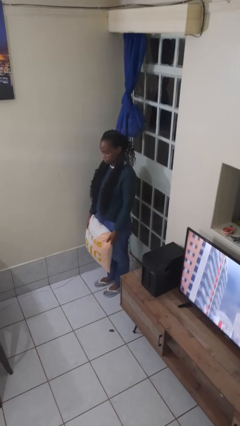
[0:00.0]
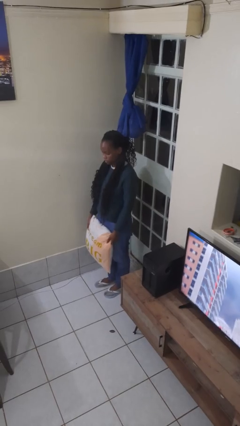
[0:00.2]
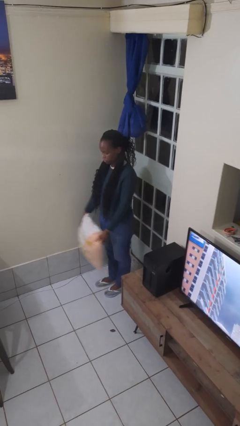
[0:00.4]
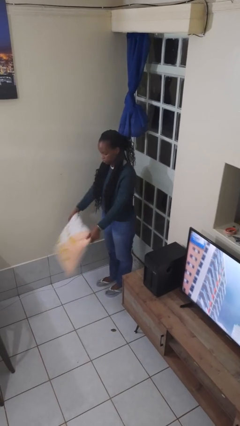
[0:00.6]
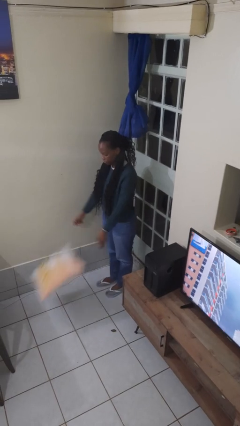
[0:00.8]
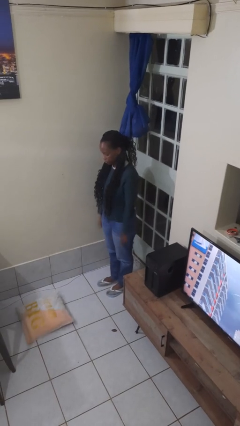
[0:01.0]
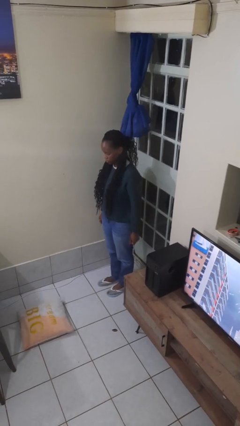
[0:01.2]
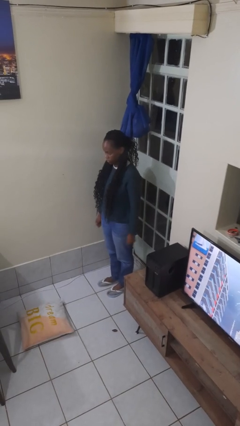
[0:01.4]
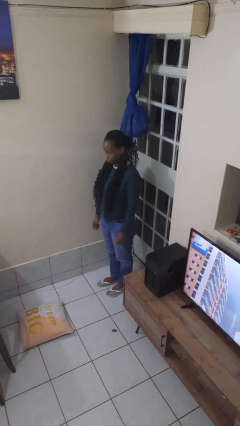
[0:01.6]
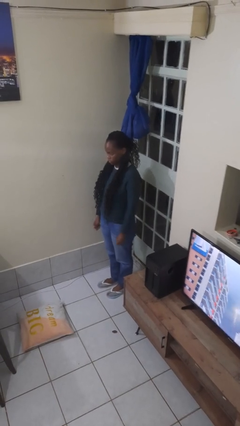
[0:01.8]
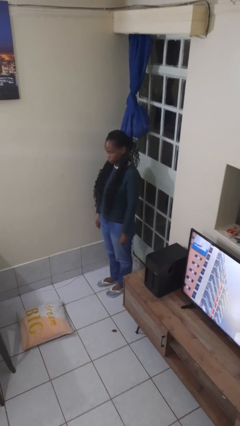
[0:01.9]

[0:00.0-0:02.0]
person throws object to ground

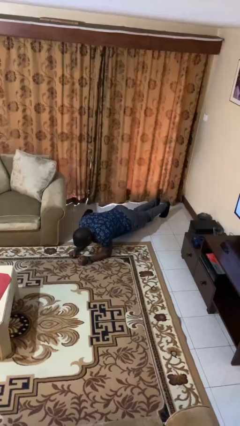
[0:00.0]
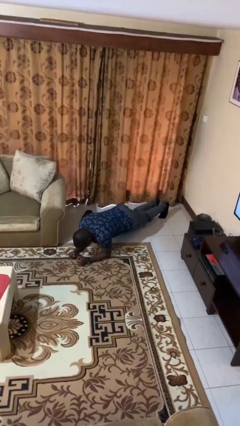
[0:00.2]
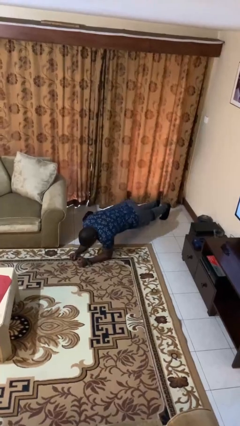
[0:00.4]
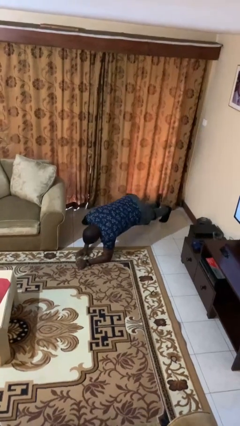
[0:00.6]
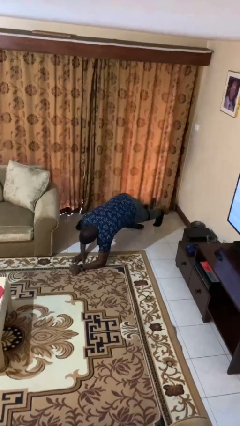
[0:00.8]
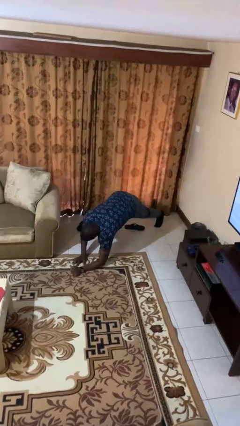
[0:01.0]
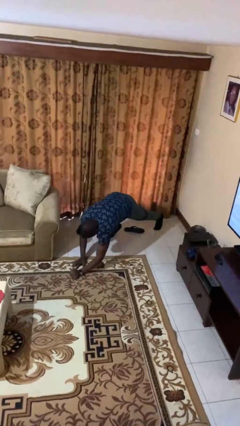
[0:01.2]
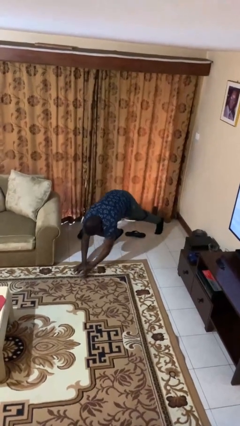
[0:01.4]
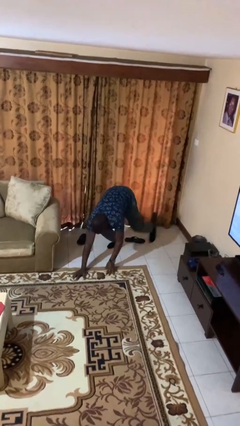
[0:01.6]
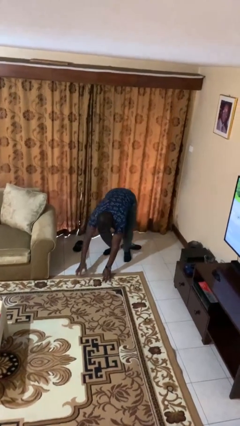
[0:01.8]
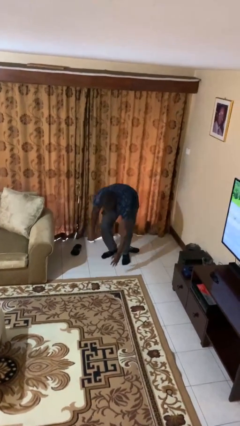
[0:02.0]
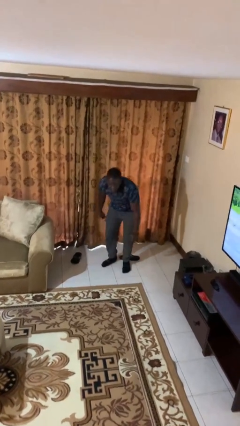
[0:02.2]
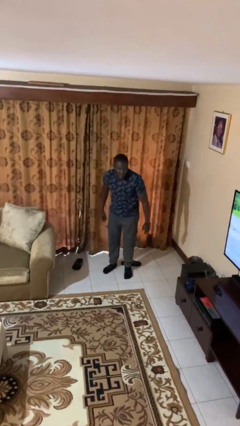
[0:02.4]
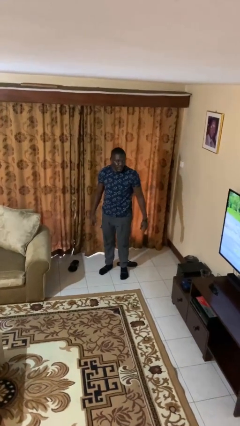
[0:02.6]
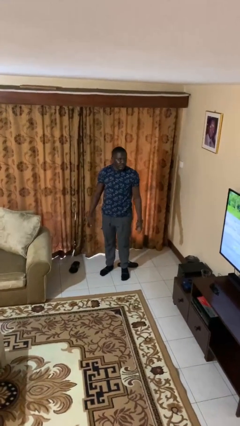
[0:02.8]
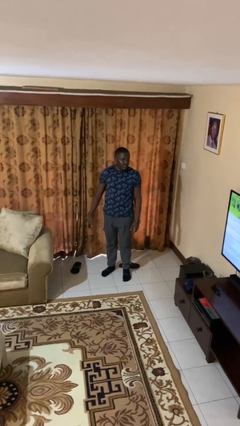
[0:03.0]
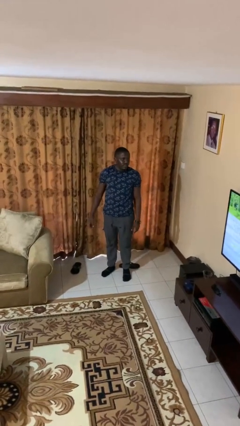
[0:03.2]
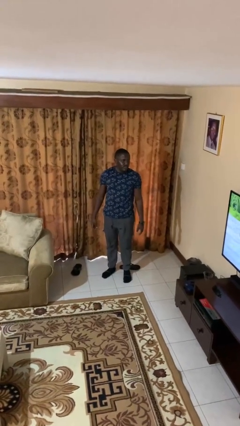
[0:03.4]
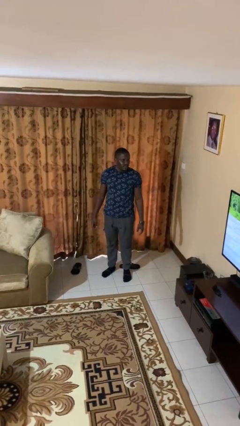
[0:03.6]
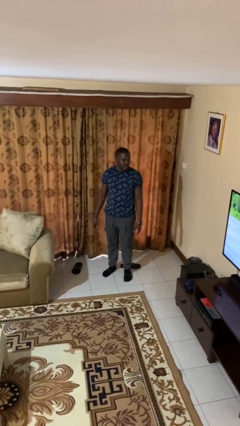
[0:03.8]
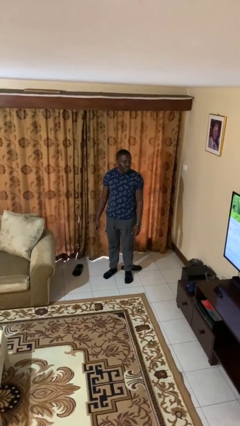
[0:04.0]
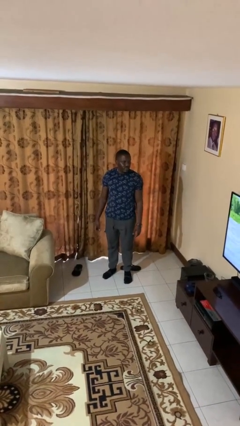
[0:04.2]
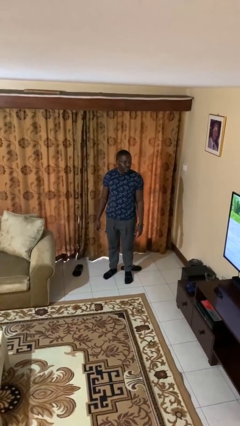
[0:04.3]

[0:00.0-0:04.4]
person stands up from floor

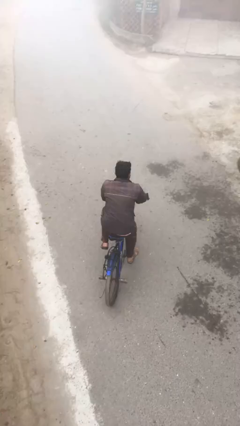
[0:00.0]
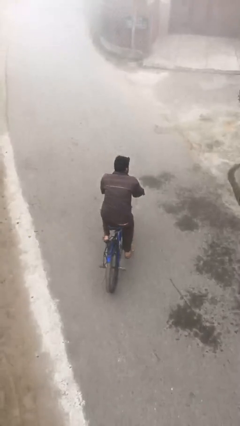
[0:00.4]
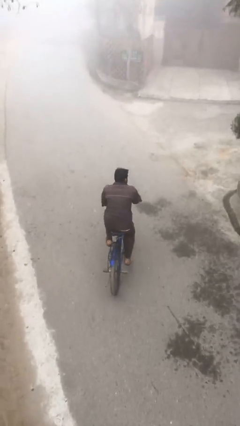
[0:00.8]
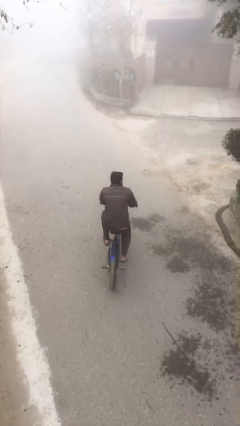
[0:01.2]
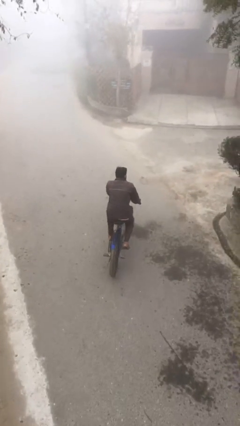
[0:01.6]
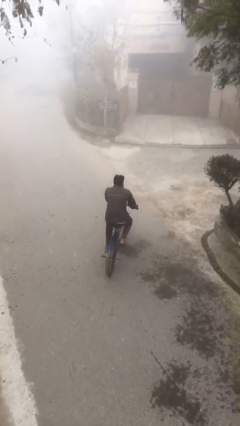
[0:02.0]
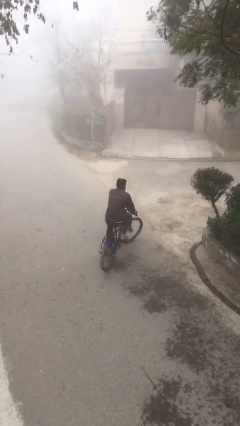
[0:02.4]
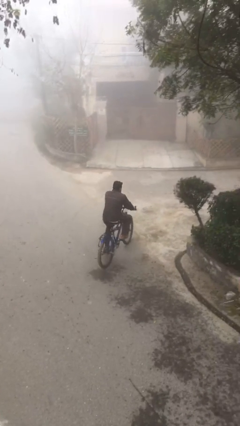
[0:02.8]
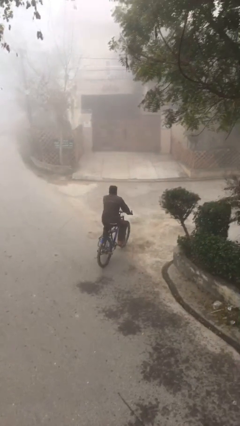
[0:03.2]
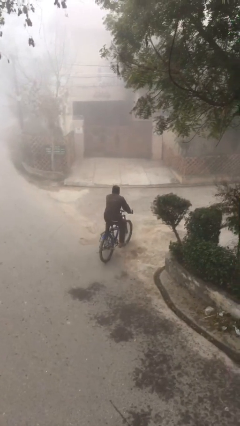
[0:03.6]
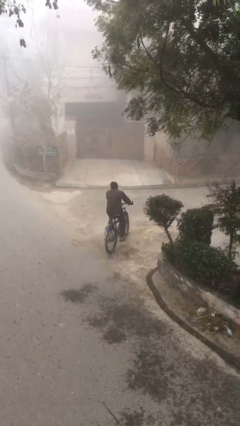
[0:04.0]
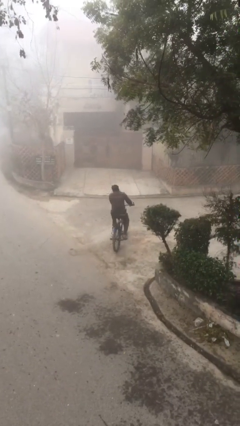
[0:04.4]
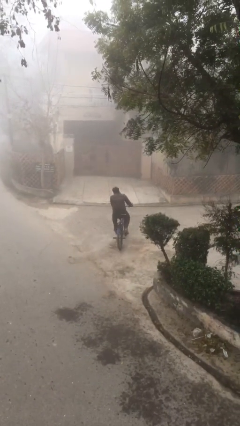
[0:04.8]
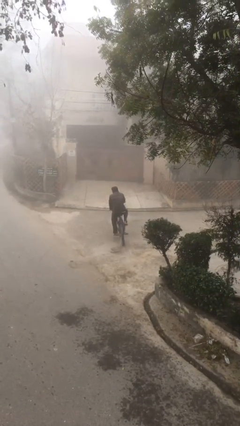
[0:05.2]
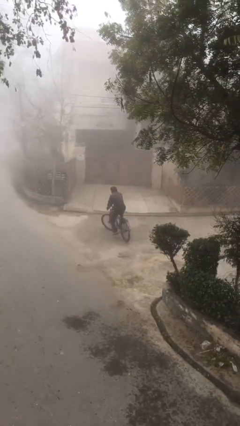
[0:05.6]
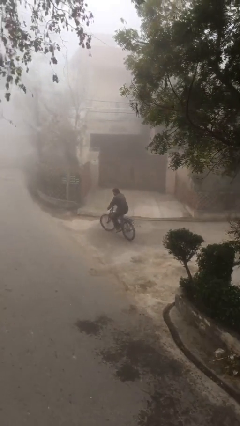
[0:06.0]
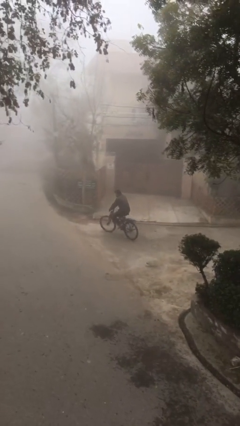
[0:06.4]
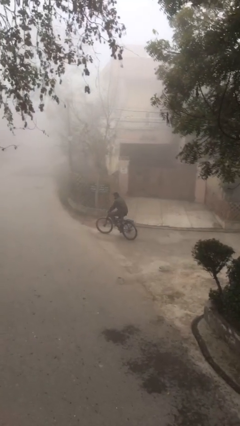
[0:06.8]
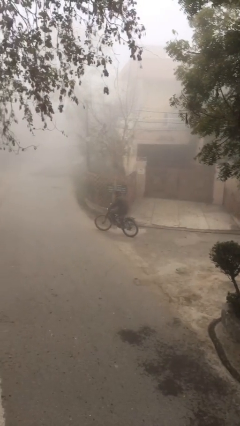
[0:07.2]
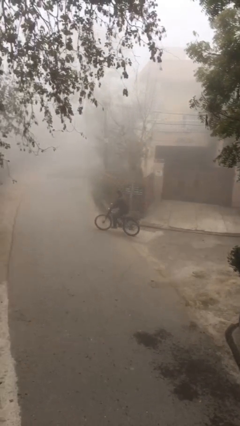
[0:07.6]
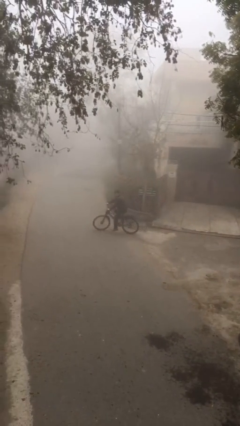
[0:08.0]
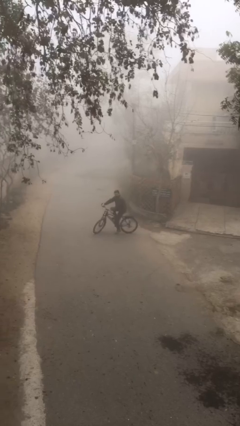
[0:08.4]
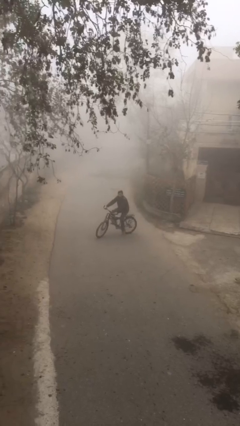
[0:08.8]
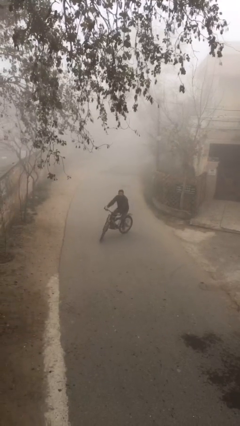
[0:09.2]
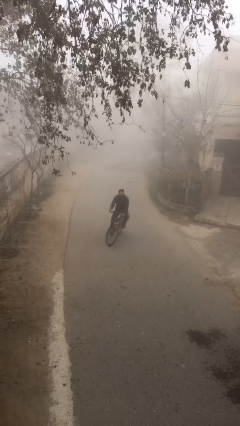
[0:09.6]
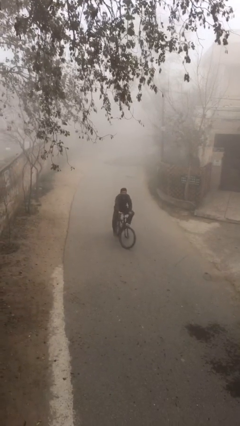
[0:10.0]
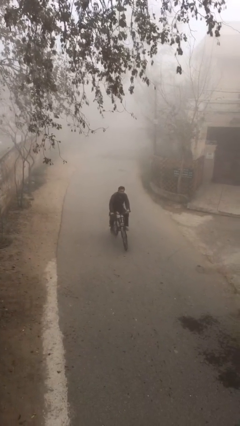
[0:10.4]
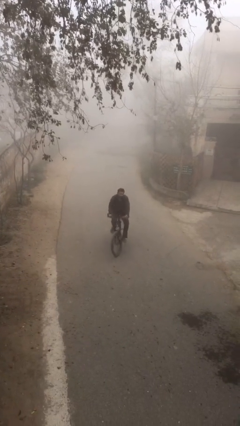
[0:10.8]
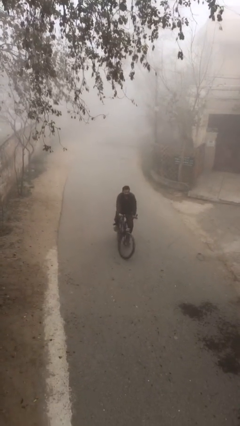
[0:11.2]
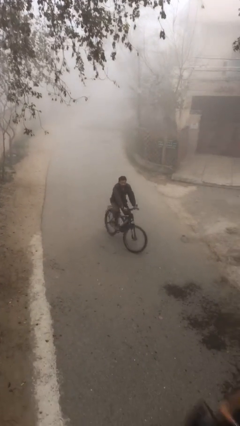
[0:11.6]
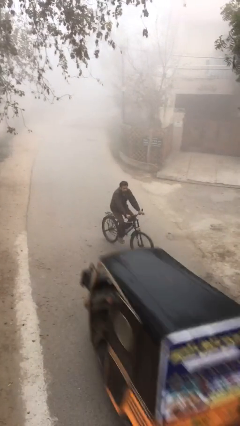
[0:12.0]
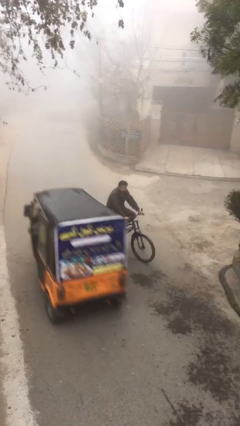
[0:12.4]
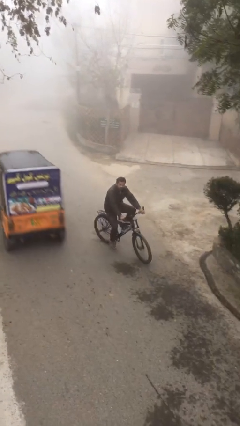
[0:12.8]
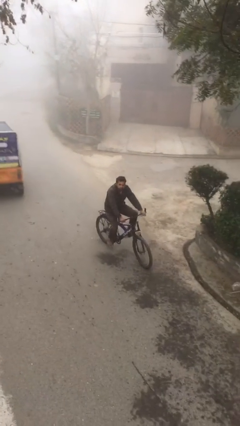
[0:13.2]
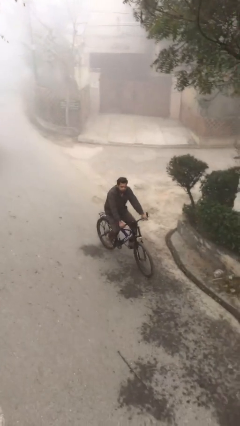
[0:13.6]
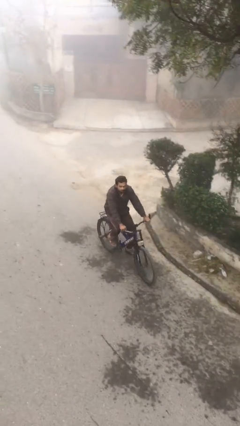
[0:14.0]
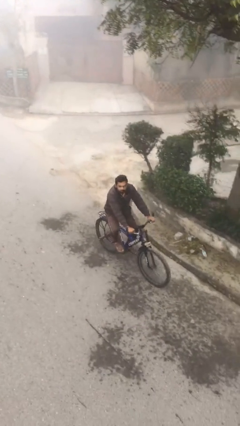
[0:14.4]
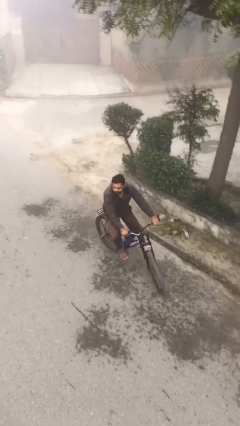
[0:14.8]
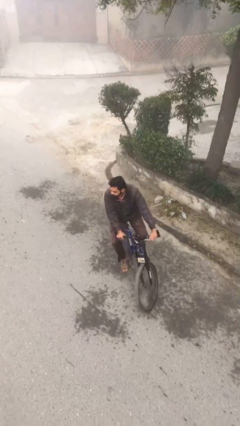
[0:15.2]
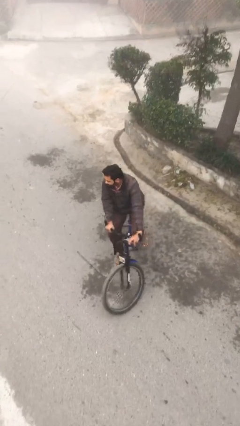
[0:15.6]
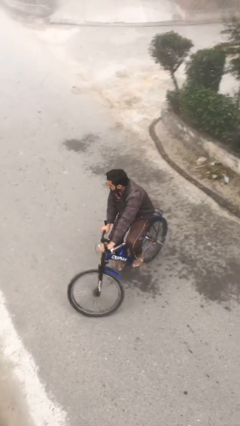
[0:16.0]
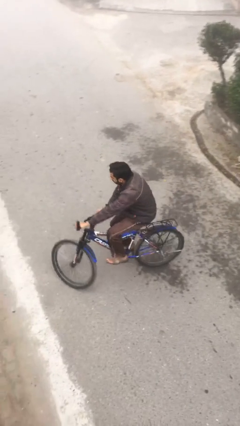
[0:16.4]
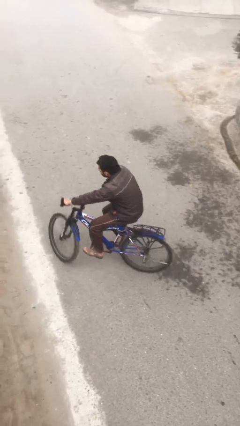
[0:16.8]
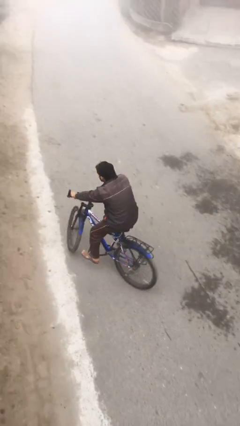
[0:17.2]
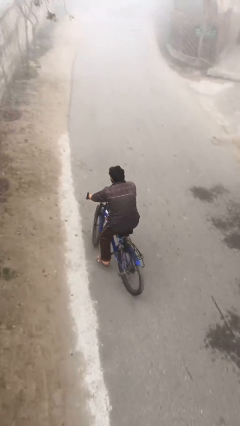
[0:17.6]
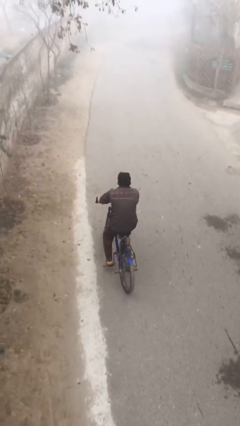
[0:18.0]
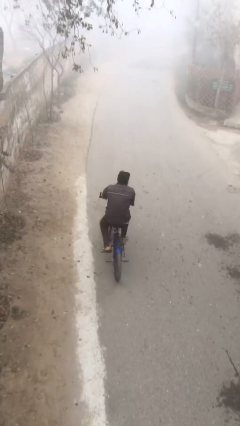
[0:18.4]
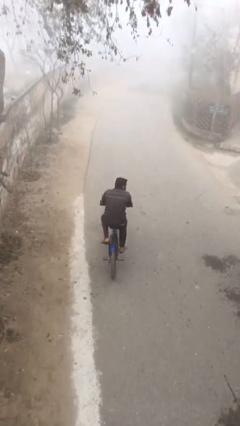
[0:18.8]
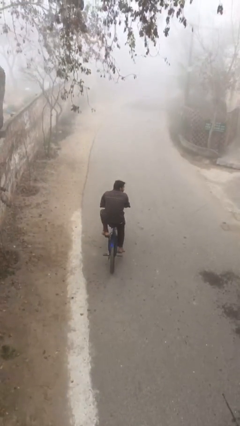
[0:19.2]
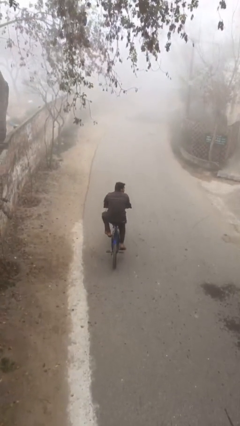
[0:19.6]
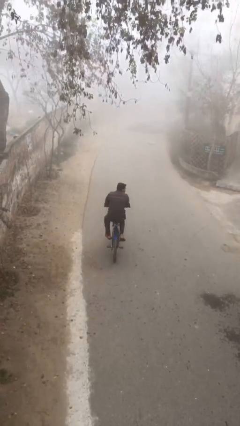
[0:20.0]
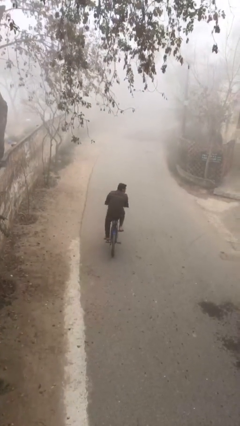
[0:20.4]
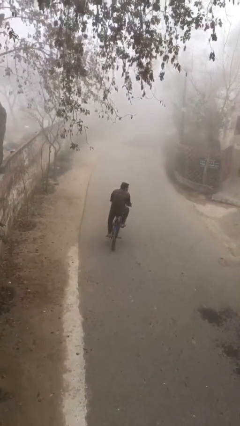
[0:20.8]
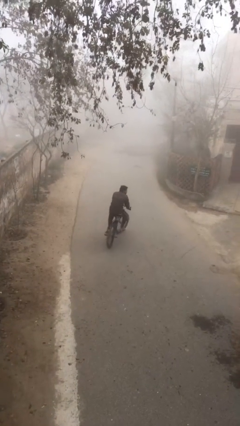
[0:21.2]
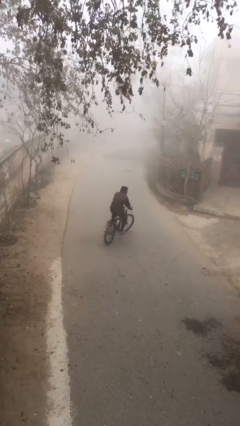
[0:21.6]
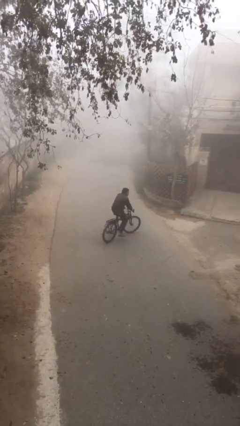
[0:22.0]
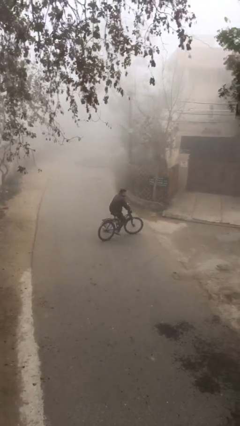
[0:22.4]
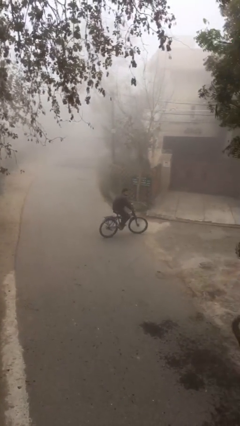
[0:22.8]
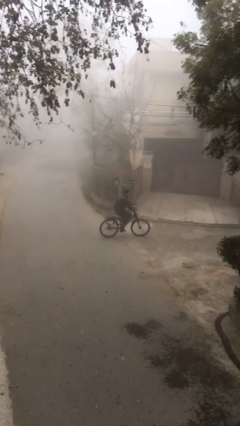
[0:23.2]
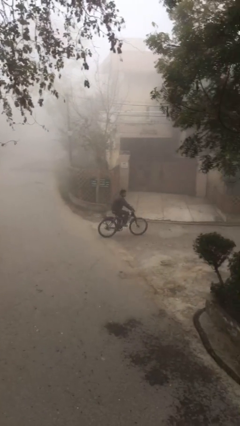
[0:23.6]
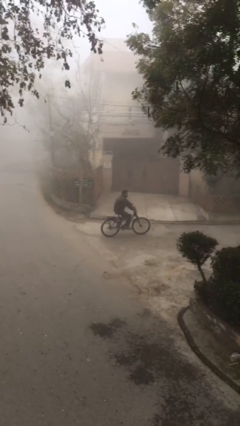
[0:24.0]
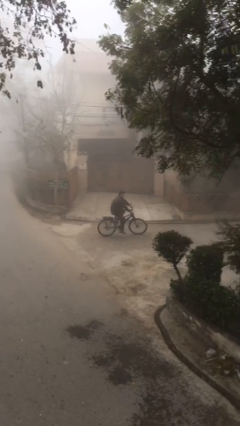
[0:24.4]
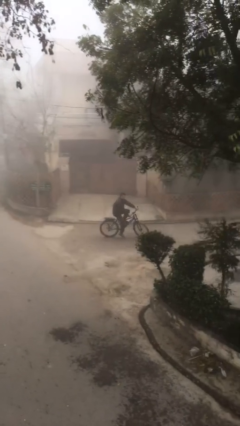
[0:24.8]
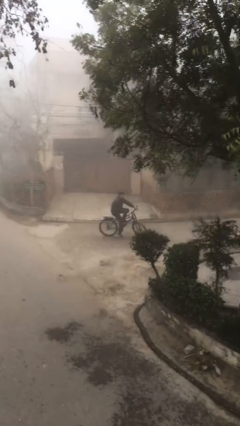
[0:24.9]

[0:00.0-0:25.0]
person rides bicycle
